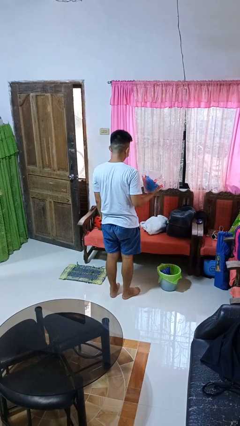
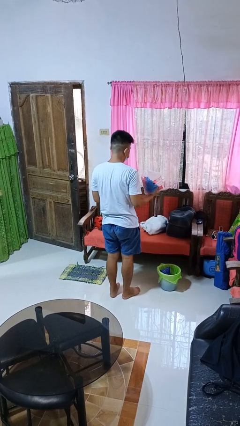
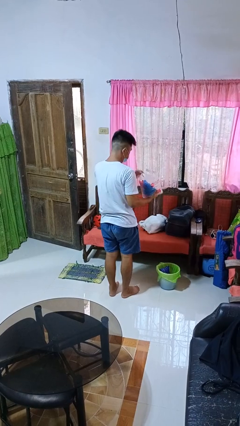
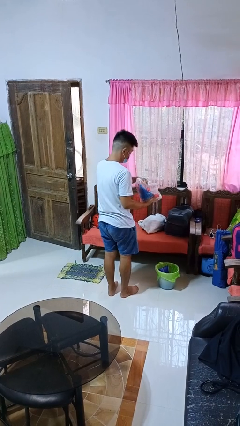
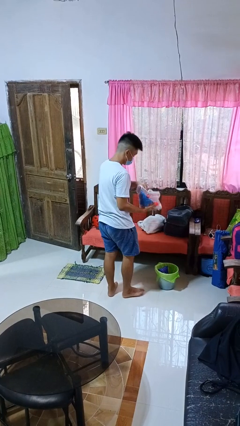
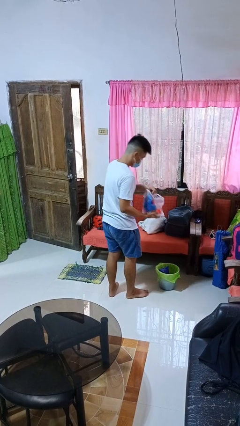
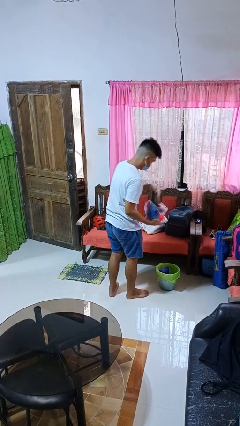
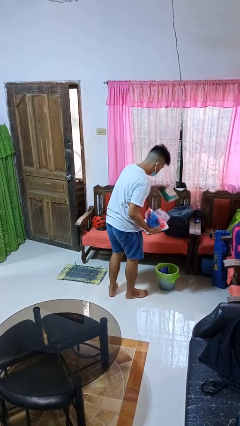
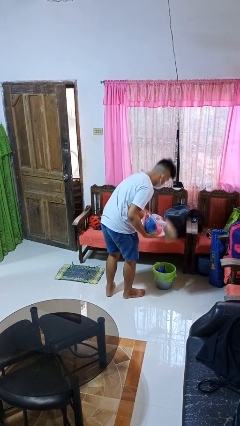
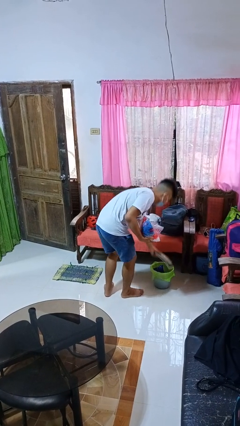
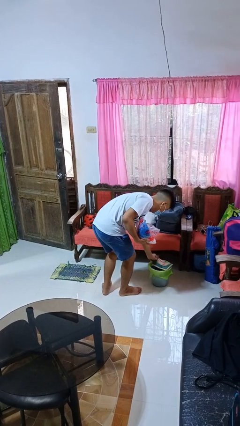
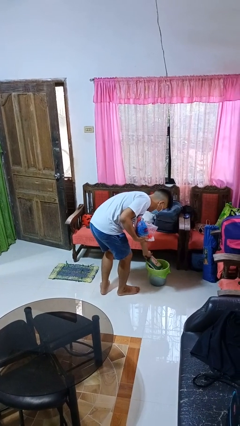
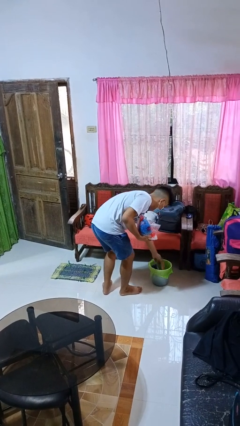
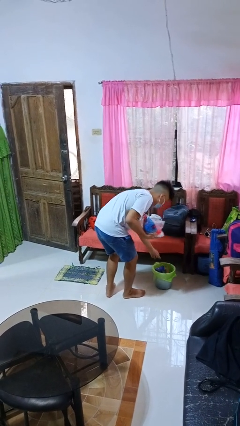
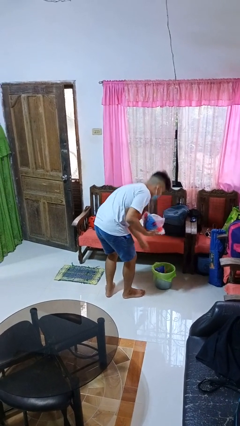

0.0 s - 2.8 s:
person discards trash

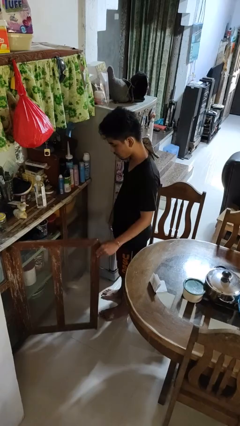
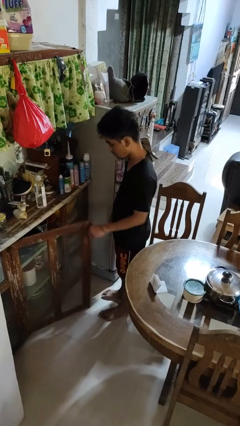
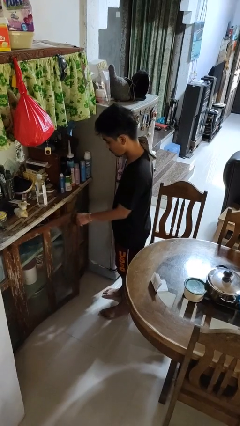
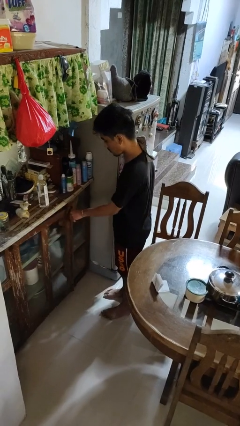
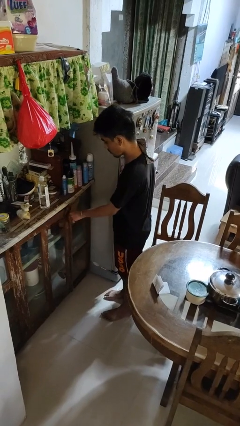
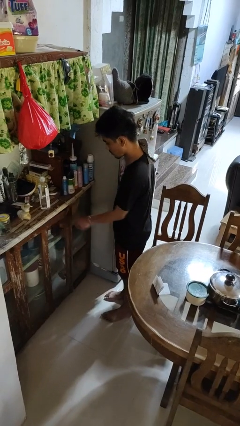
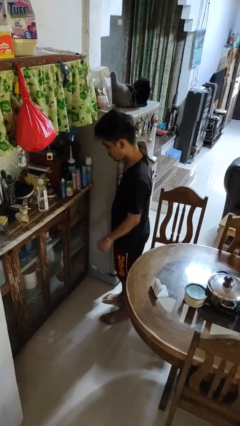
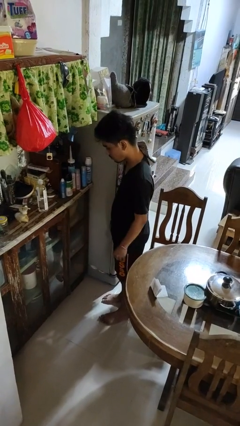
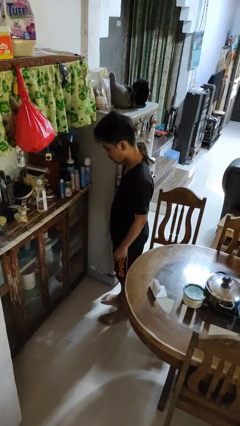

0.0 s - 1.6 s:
person closes cabinet

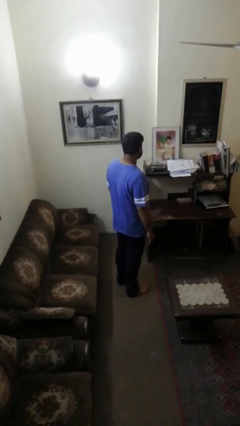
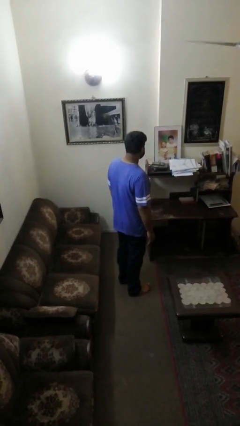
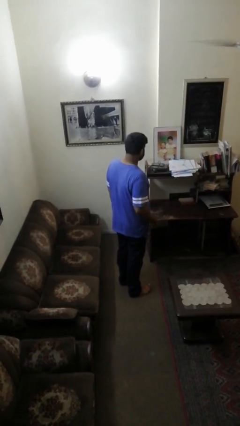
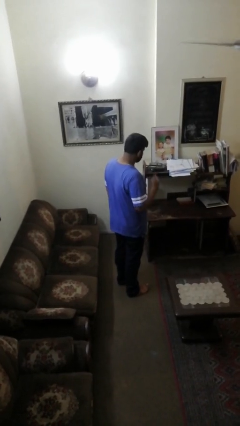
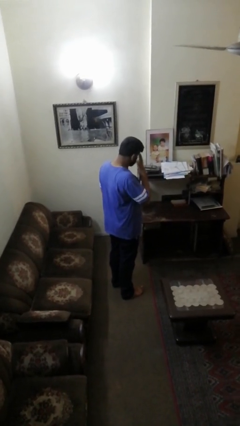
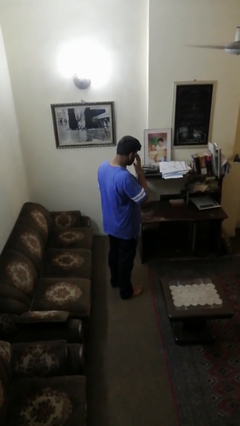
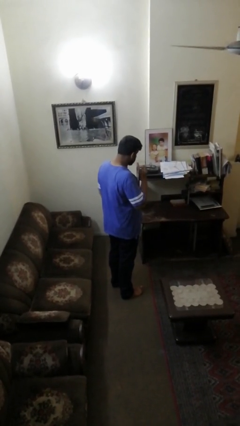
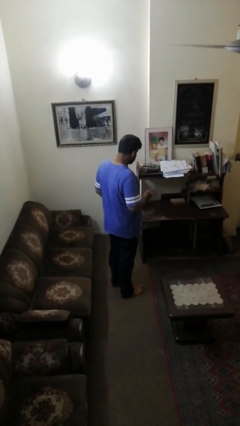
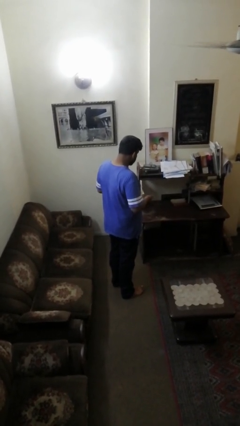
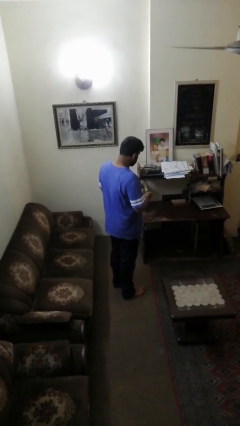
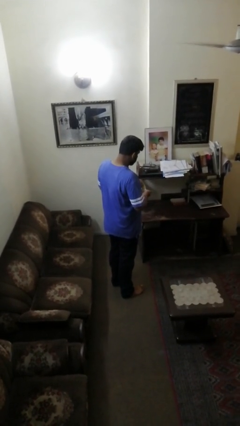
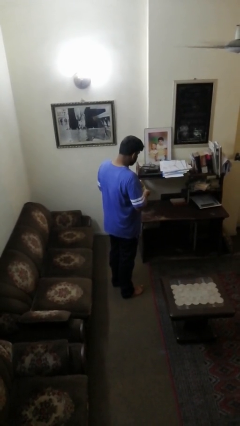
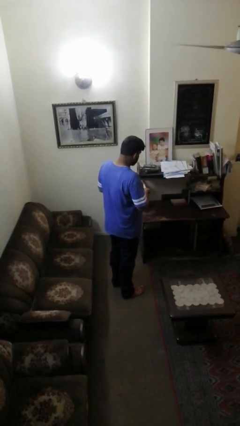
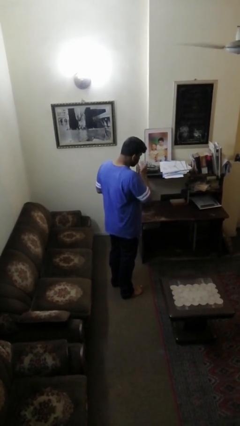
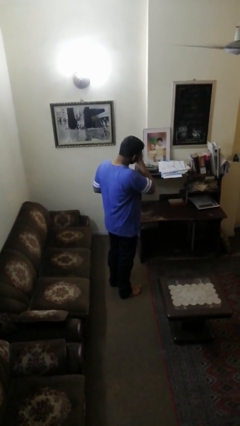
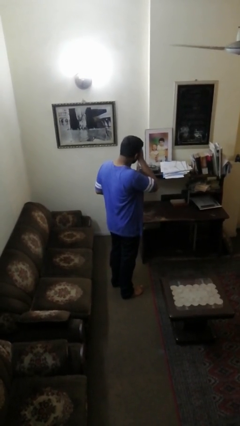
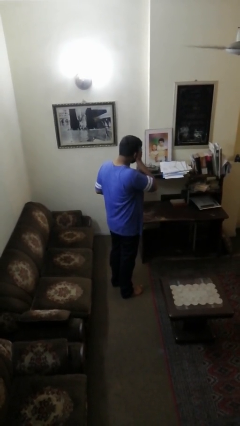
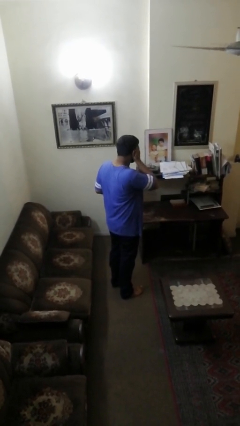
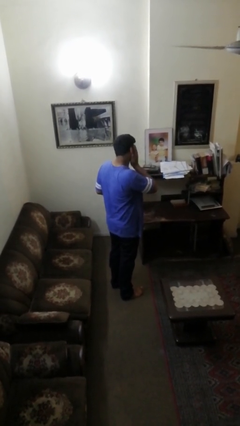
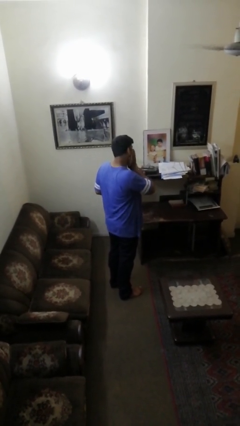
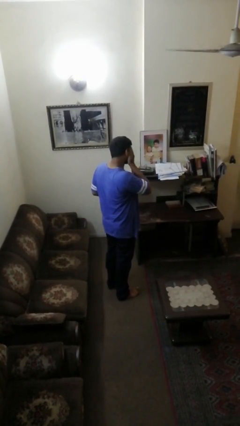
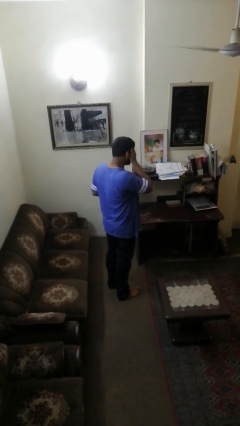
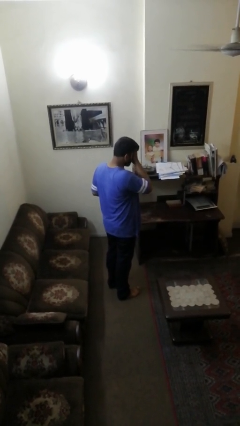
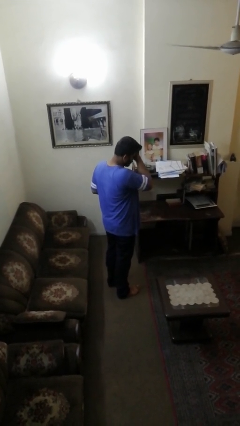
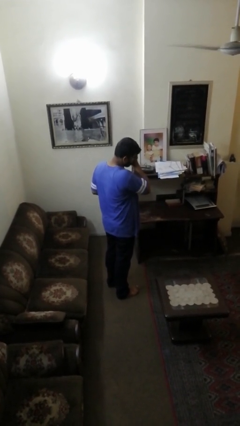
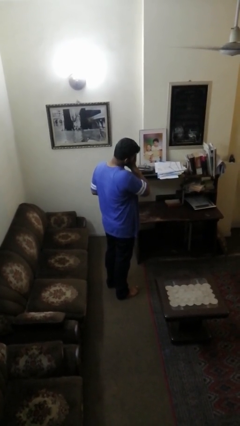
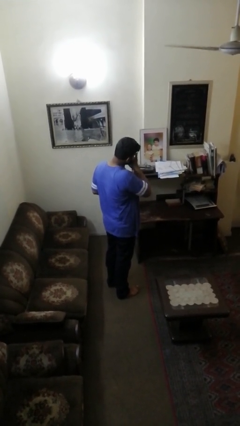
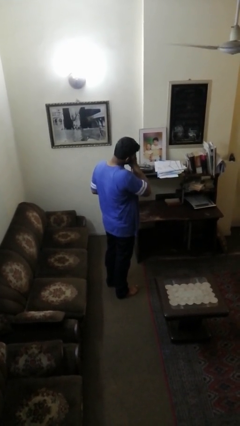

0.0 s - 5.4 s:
person applies sunscreen

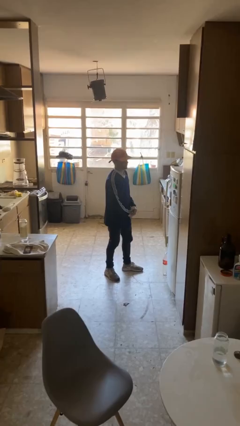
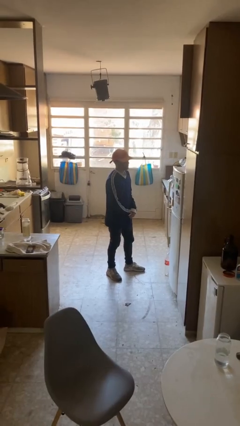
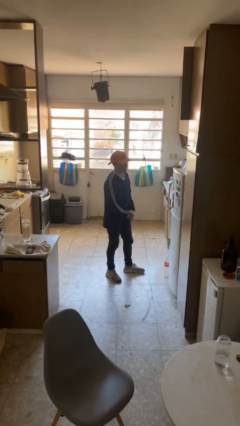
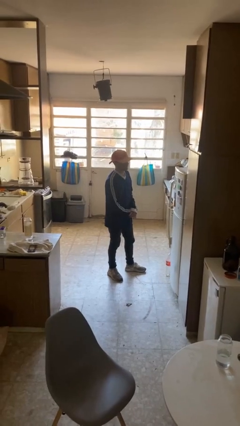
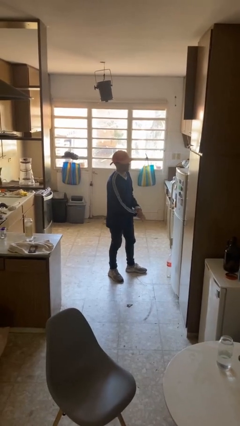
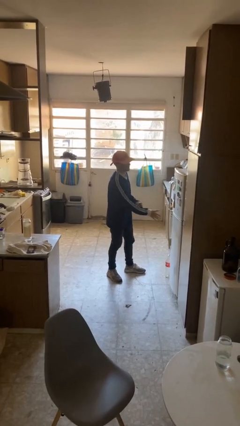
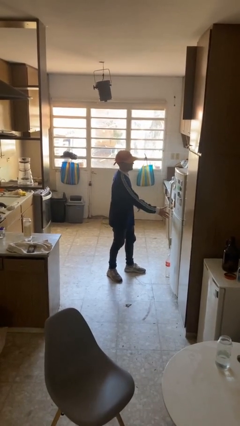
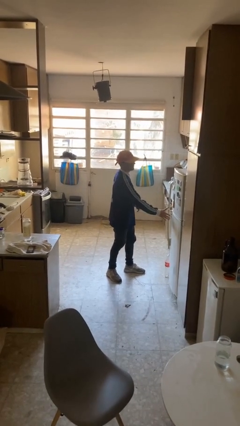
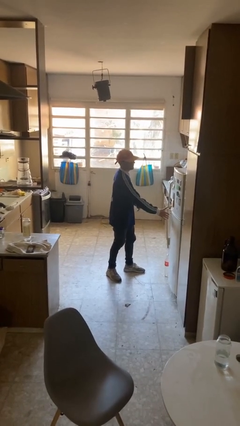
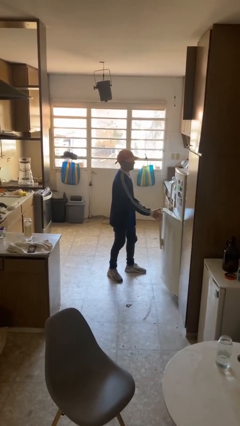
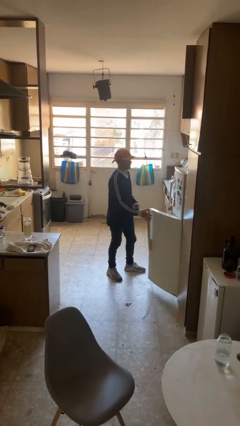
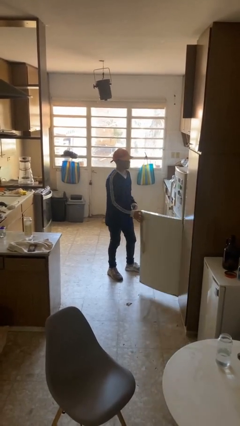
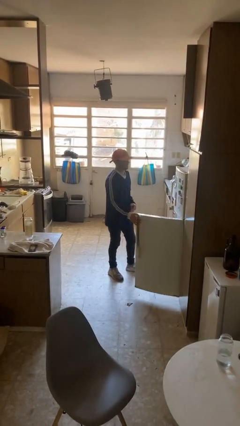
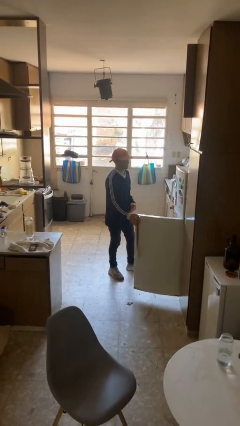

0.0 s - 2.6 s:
person opens refrigerator

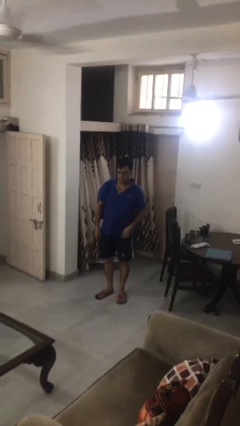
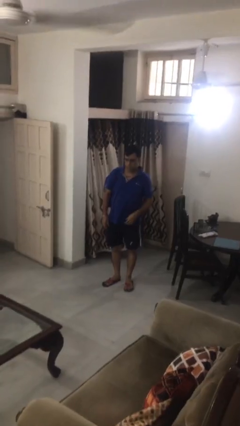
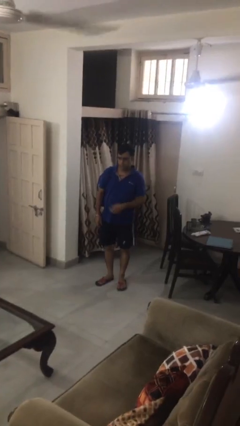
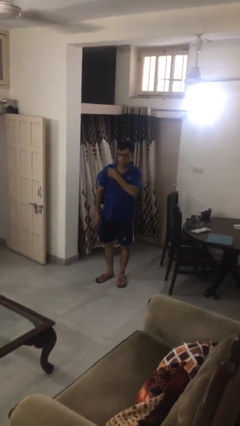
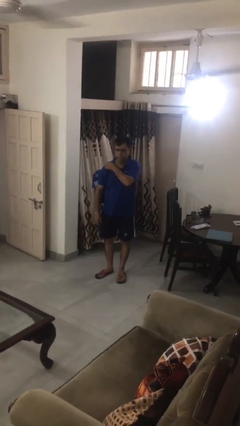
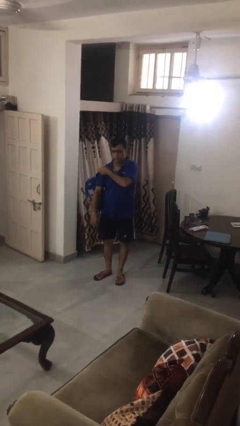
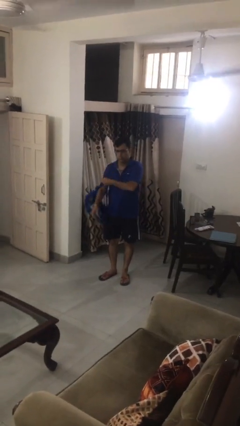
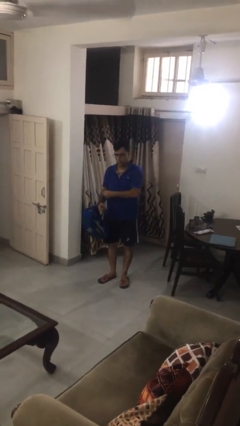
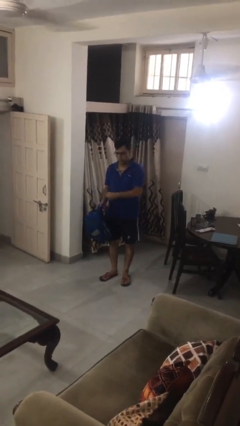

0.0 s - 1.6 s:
person takes off backpack

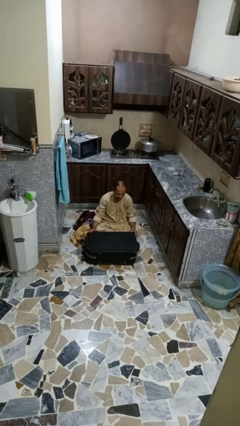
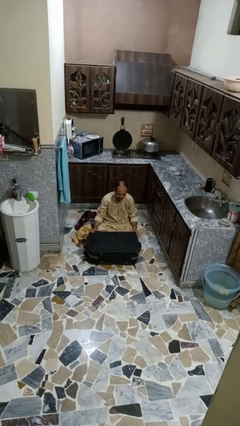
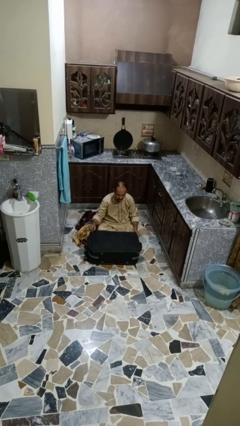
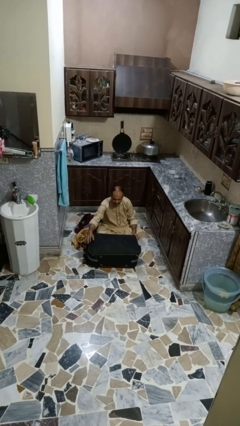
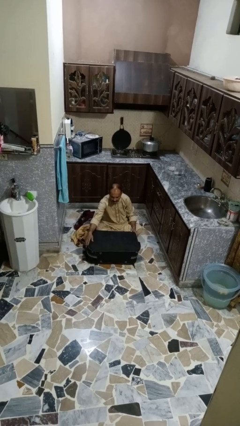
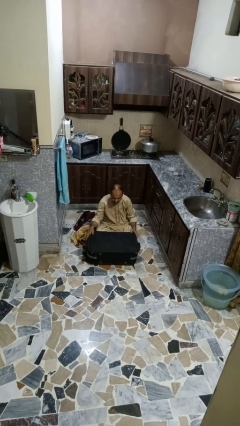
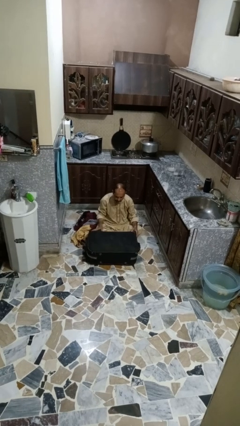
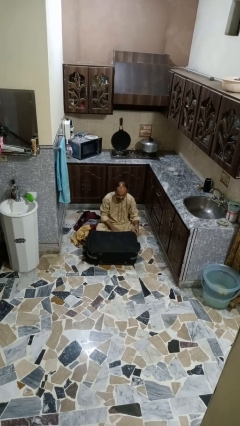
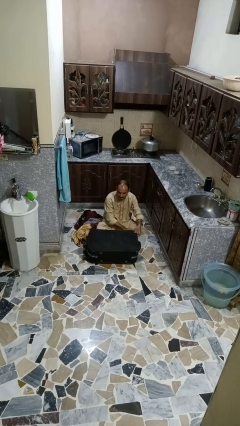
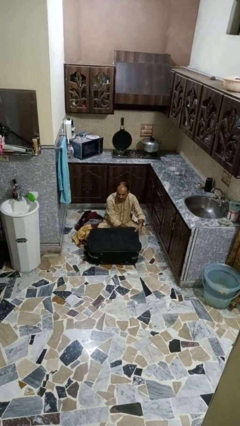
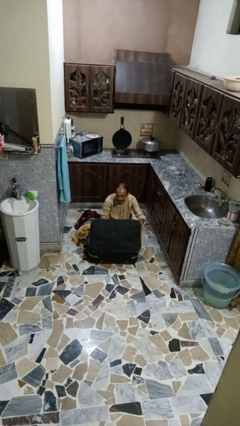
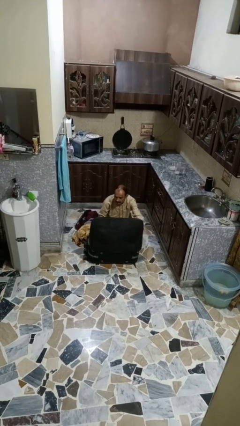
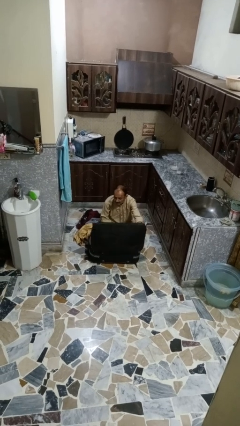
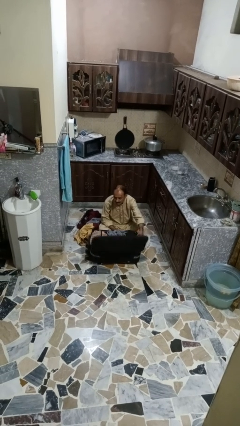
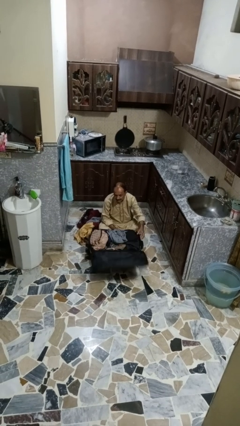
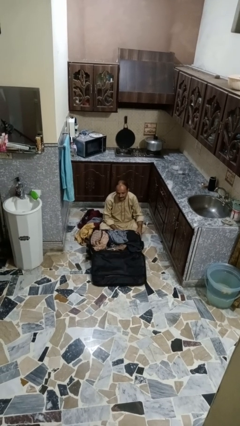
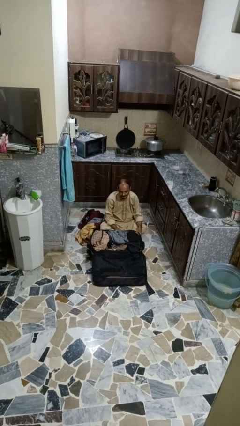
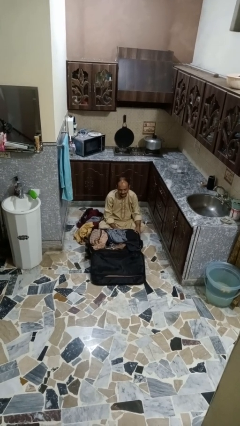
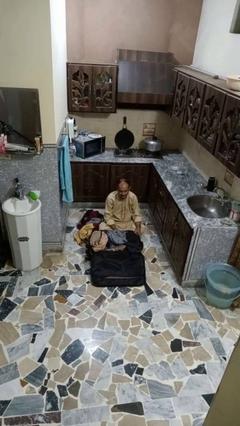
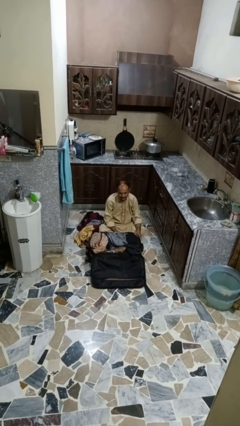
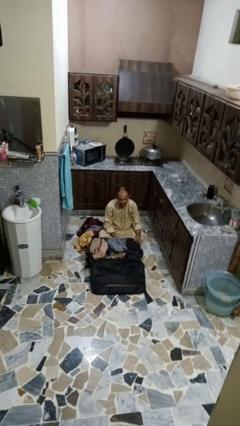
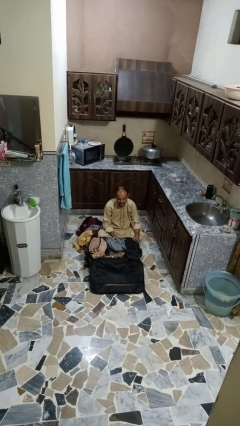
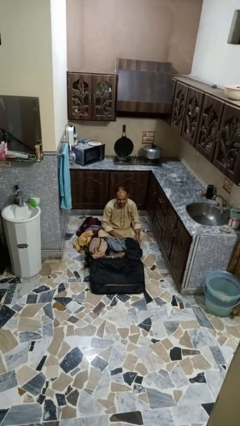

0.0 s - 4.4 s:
person opens suitcase
